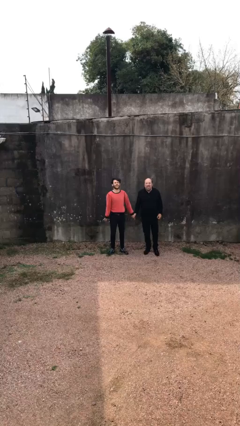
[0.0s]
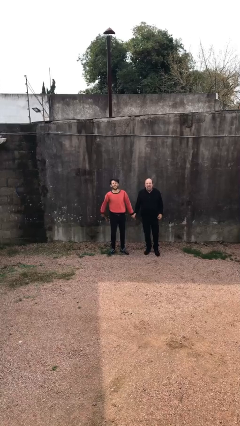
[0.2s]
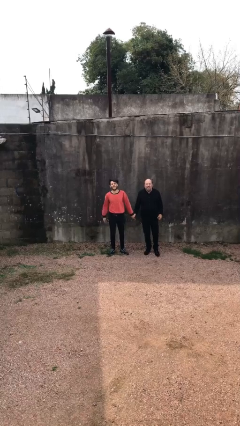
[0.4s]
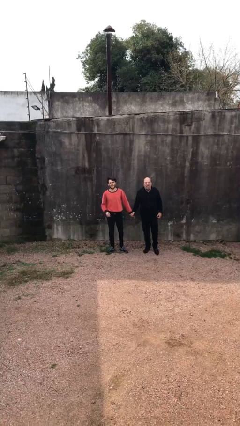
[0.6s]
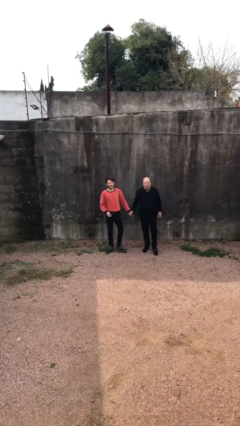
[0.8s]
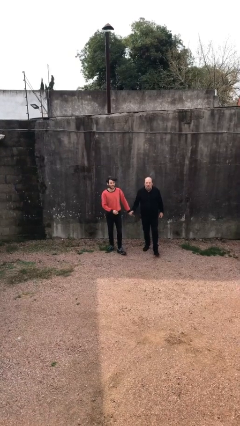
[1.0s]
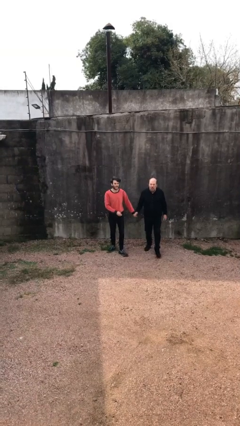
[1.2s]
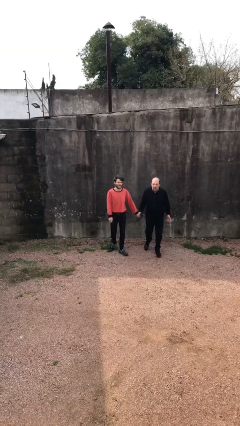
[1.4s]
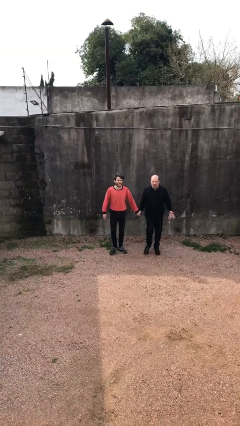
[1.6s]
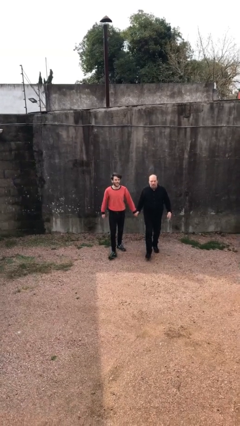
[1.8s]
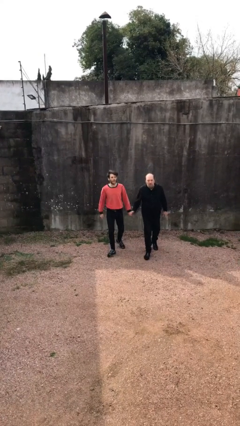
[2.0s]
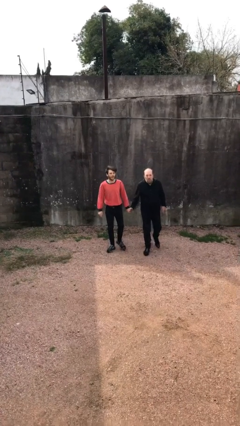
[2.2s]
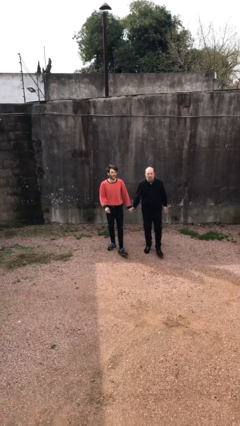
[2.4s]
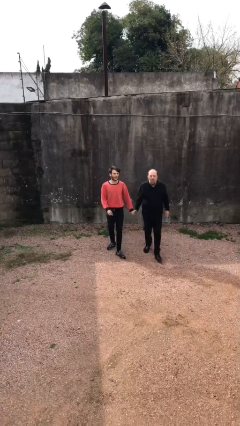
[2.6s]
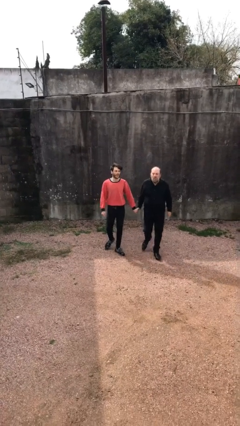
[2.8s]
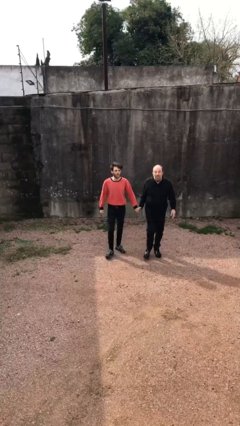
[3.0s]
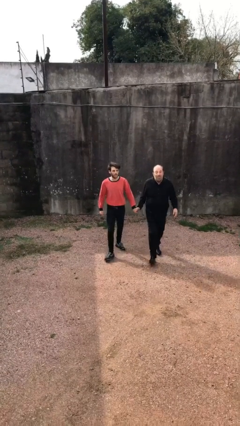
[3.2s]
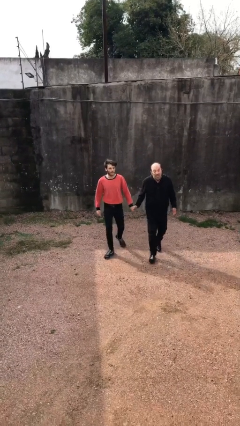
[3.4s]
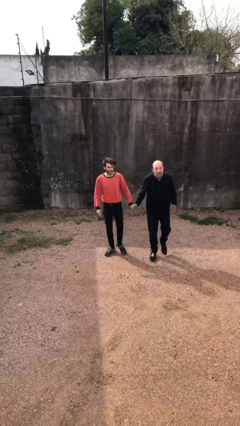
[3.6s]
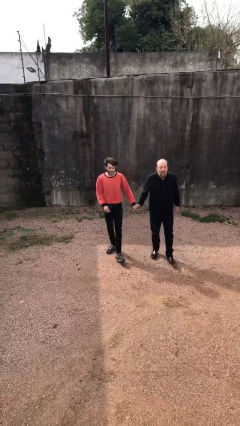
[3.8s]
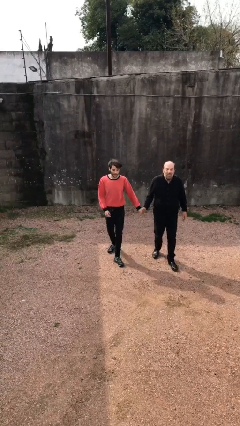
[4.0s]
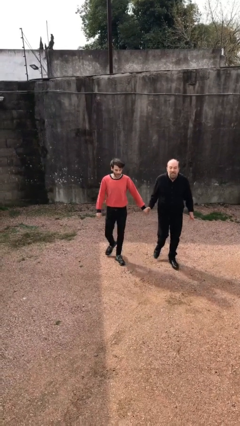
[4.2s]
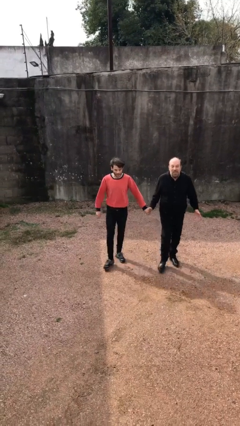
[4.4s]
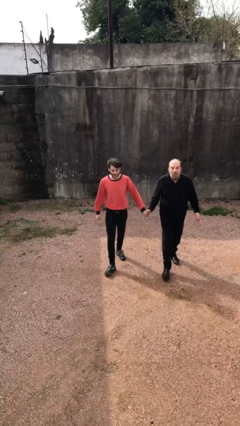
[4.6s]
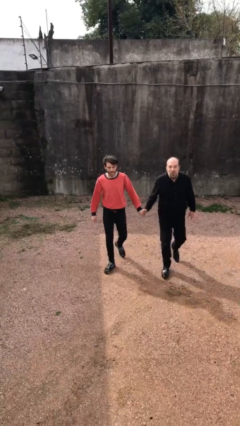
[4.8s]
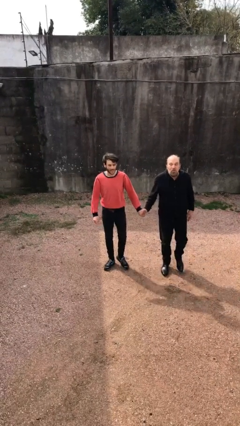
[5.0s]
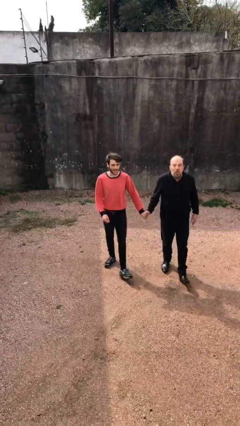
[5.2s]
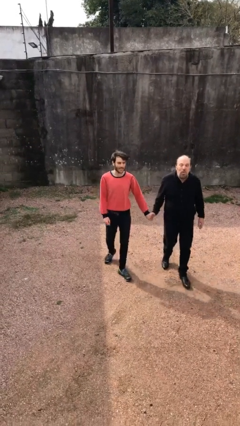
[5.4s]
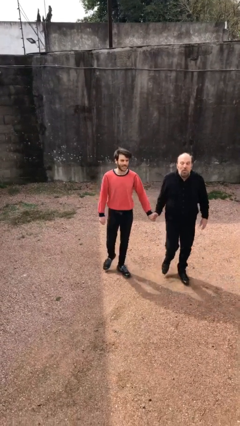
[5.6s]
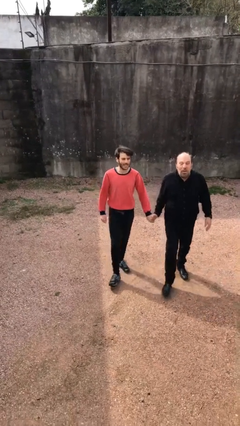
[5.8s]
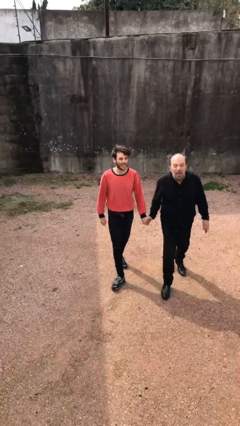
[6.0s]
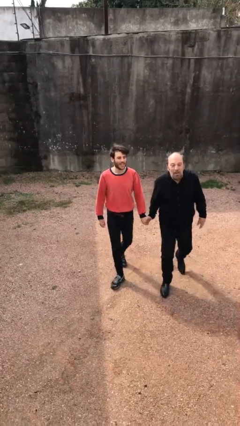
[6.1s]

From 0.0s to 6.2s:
person holds hand

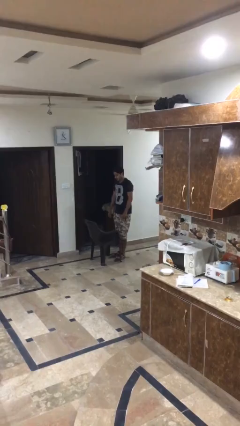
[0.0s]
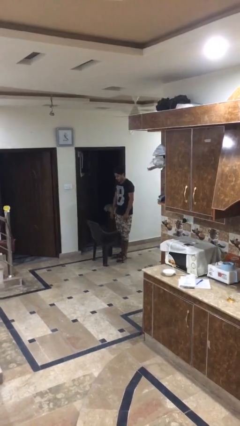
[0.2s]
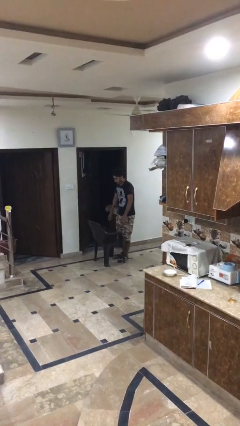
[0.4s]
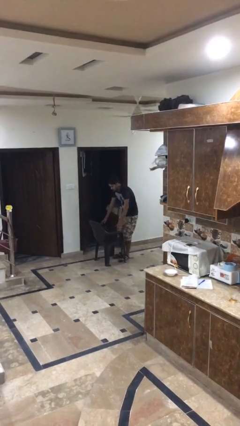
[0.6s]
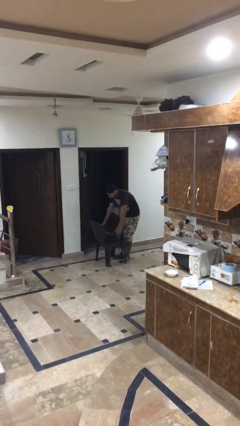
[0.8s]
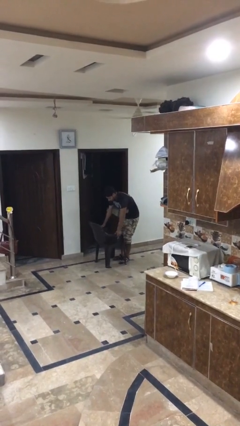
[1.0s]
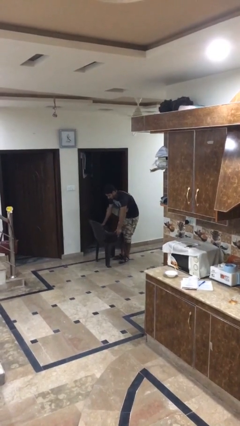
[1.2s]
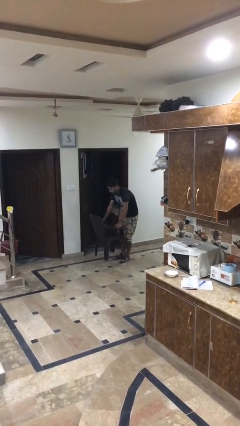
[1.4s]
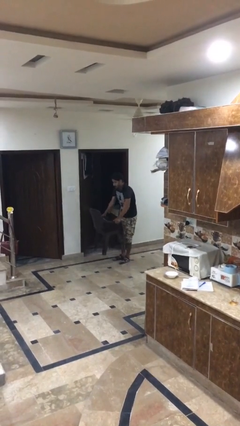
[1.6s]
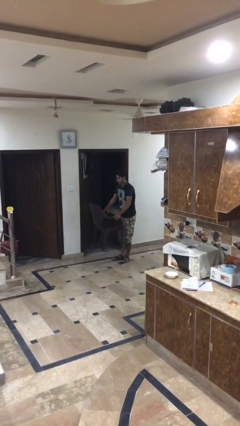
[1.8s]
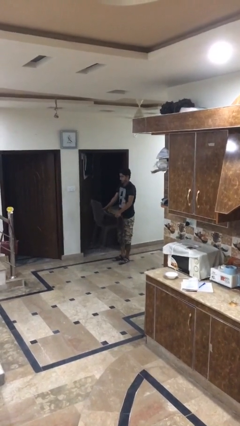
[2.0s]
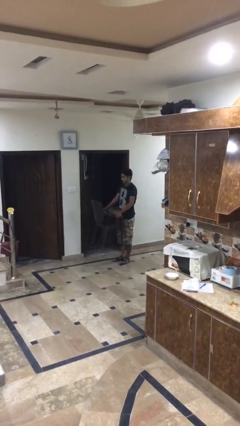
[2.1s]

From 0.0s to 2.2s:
person picks up object from floor

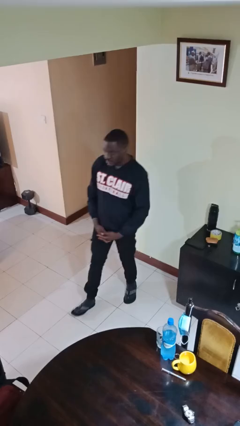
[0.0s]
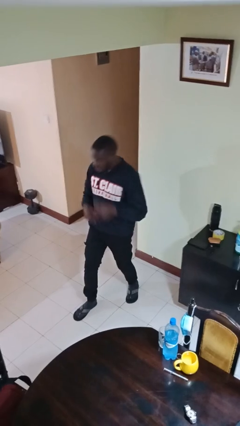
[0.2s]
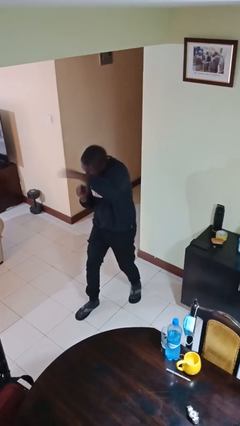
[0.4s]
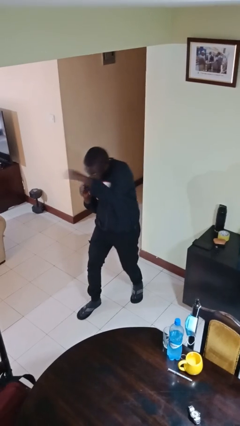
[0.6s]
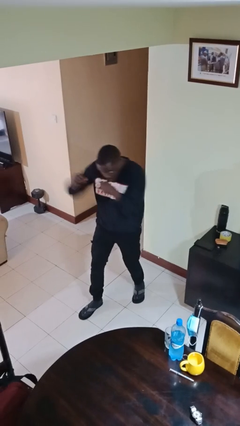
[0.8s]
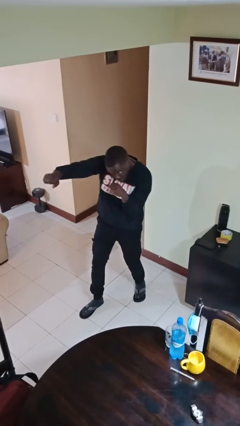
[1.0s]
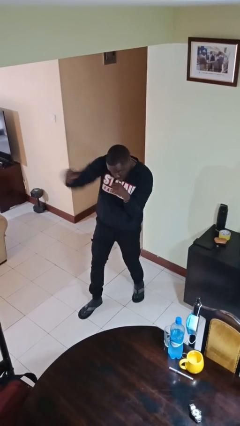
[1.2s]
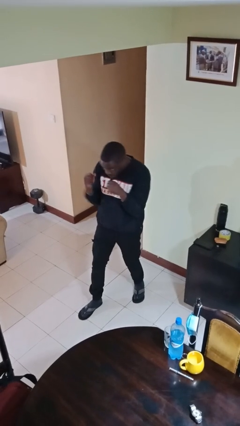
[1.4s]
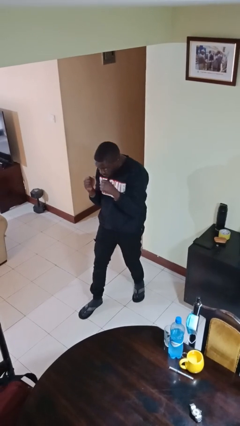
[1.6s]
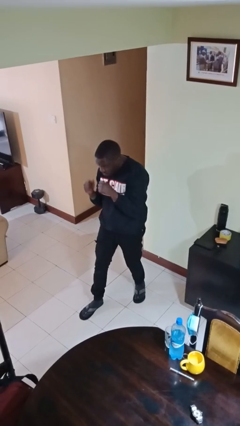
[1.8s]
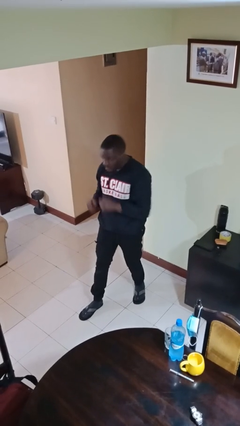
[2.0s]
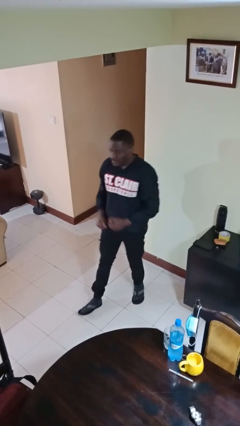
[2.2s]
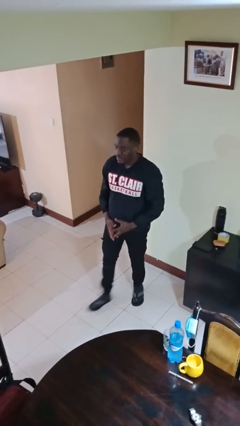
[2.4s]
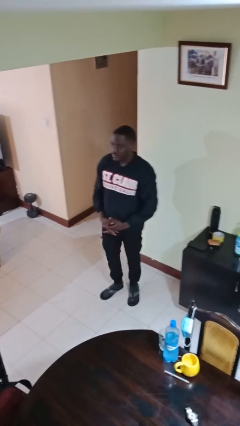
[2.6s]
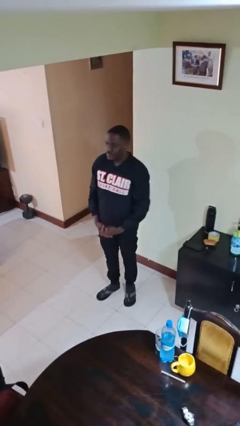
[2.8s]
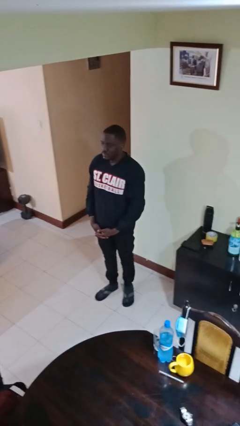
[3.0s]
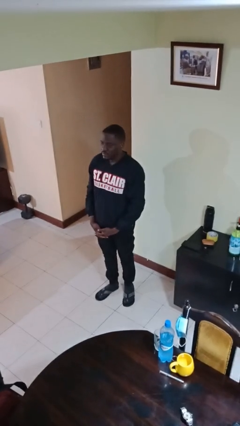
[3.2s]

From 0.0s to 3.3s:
person punches

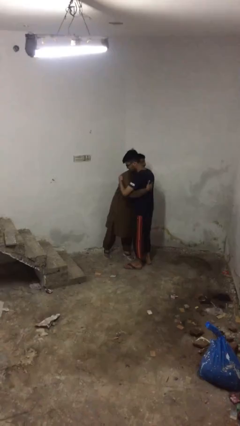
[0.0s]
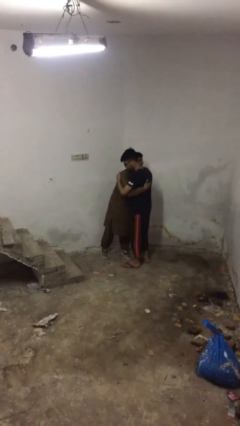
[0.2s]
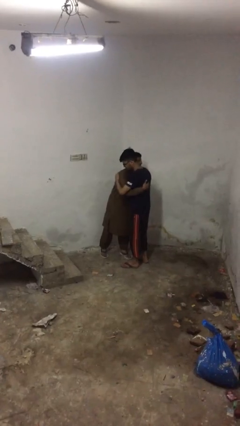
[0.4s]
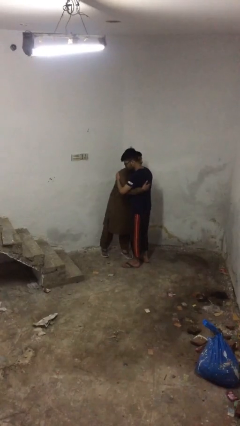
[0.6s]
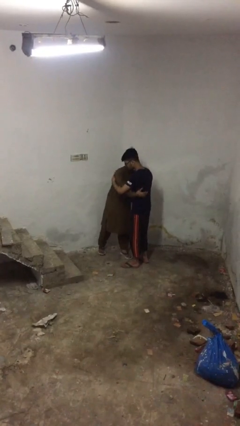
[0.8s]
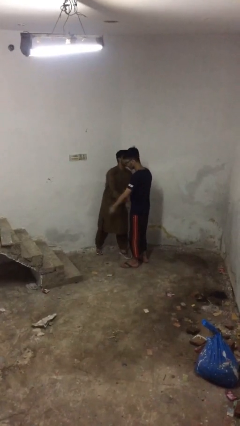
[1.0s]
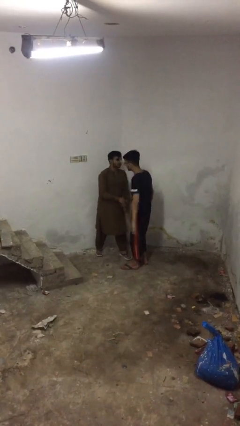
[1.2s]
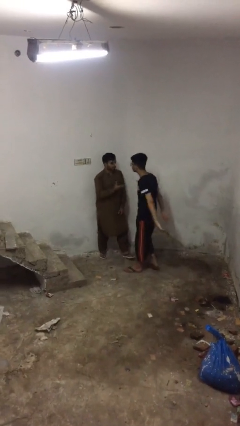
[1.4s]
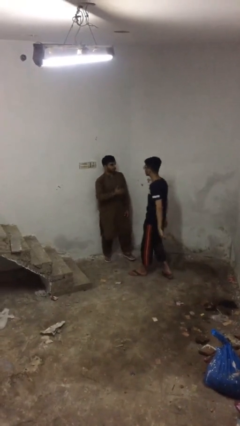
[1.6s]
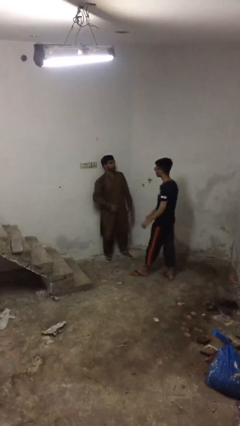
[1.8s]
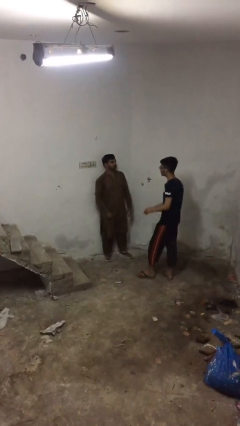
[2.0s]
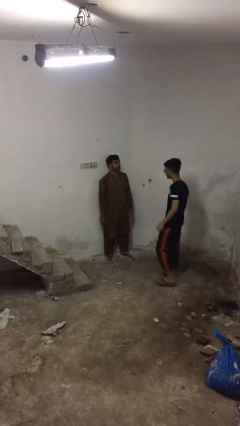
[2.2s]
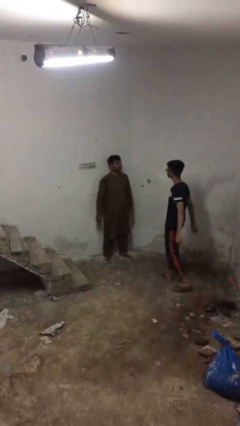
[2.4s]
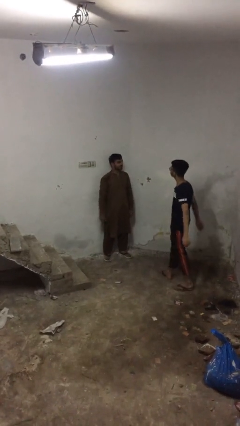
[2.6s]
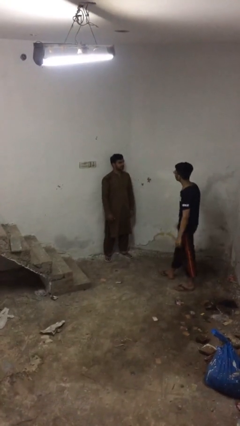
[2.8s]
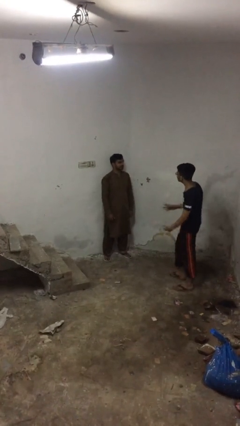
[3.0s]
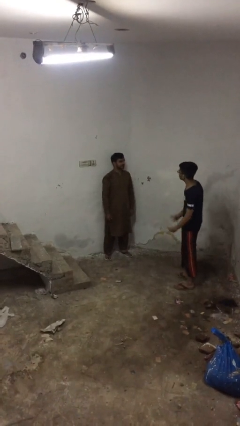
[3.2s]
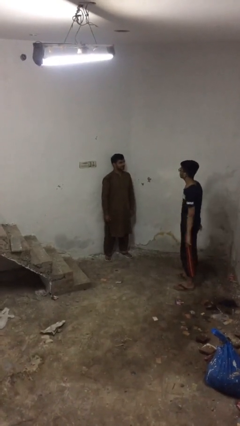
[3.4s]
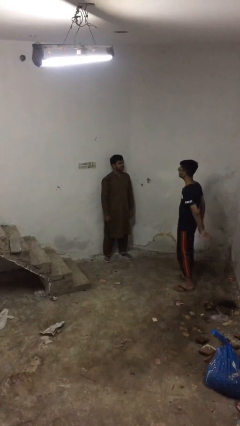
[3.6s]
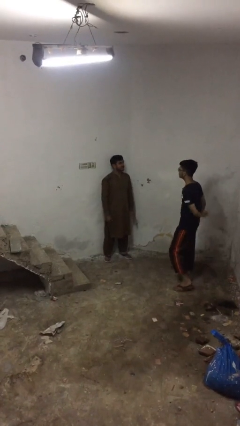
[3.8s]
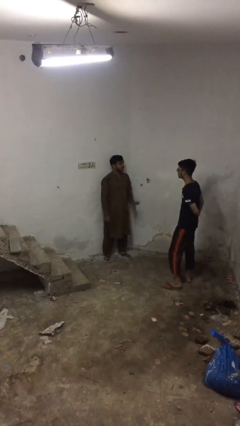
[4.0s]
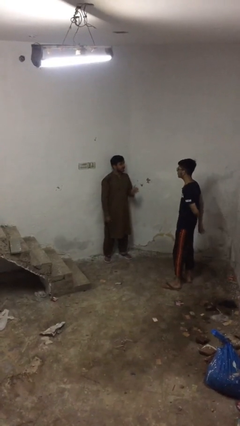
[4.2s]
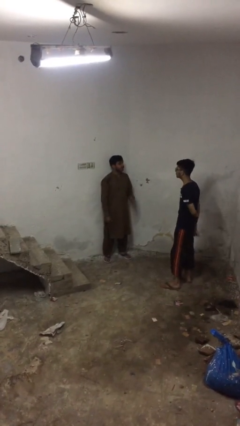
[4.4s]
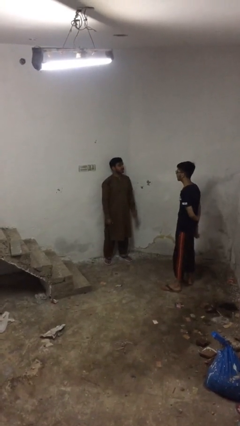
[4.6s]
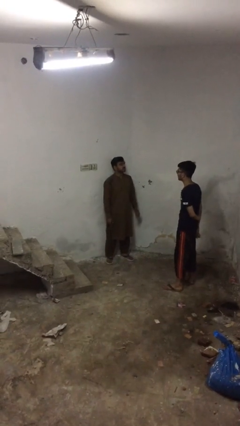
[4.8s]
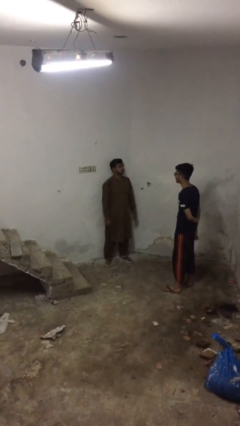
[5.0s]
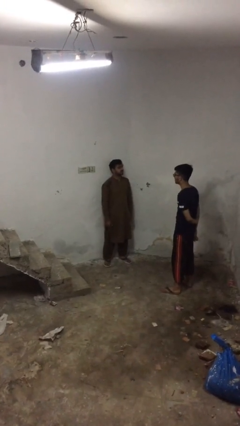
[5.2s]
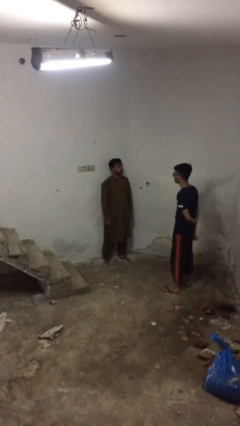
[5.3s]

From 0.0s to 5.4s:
person talks to person

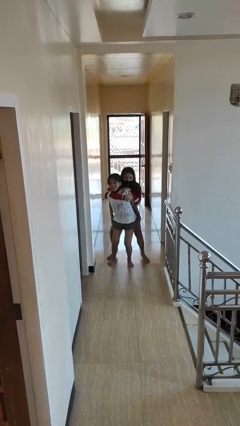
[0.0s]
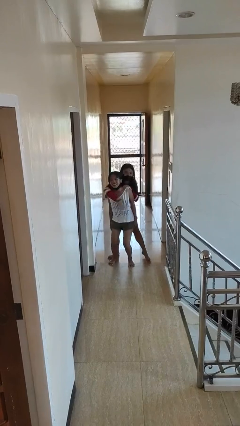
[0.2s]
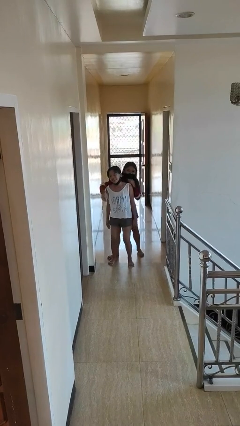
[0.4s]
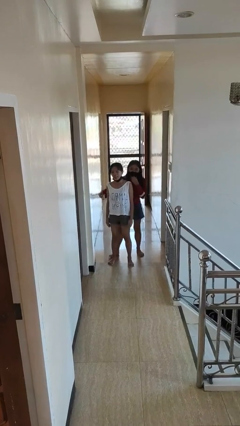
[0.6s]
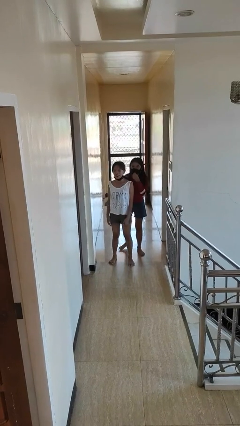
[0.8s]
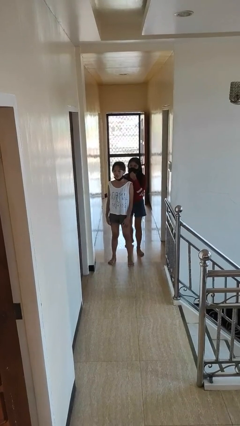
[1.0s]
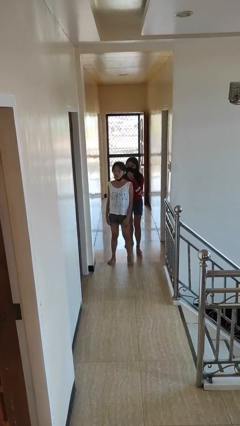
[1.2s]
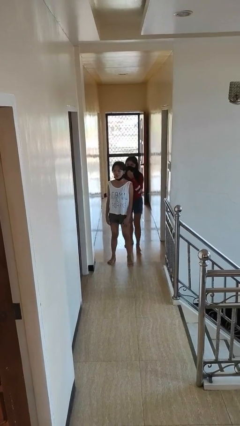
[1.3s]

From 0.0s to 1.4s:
person puts down person
